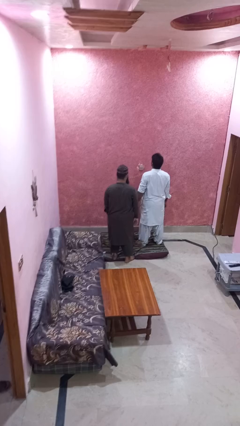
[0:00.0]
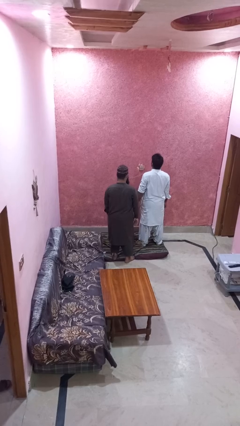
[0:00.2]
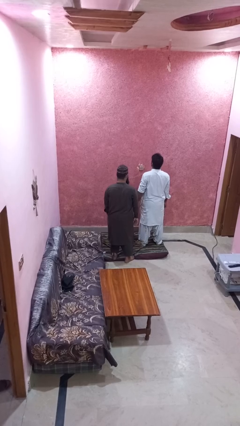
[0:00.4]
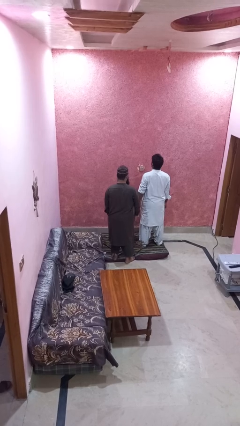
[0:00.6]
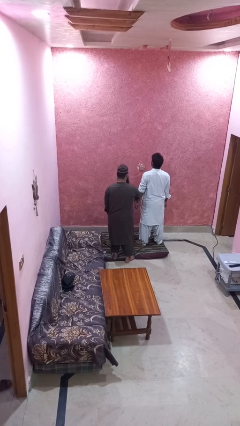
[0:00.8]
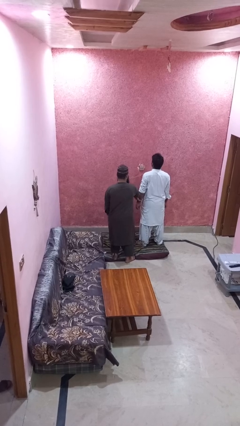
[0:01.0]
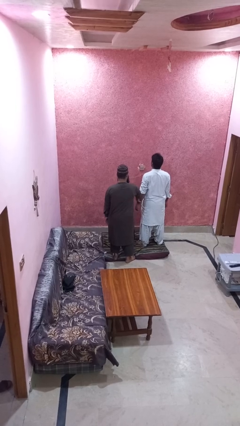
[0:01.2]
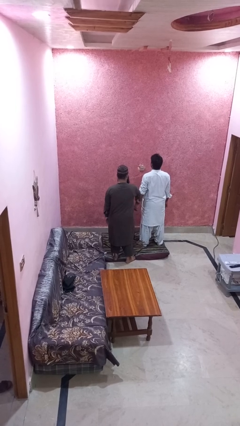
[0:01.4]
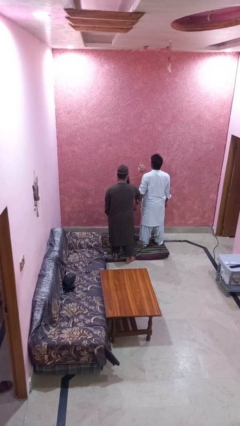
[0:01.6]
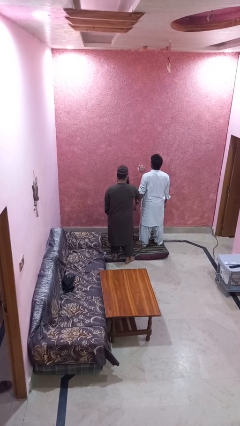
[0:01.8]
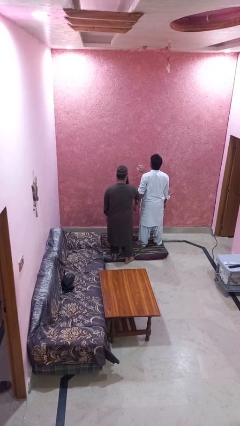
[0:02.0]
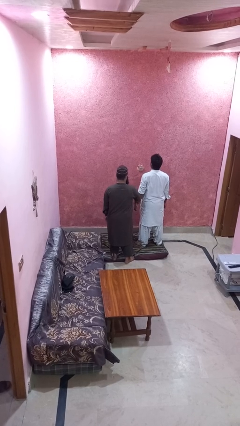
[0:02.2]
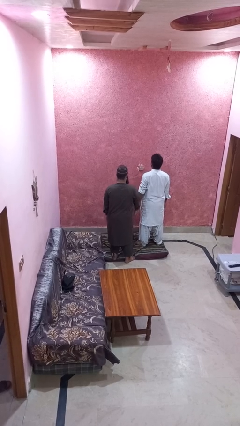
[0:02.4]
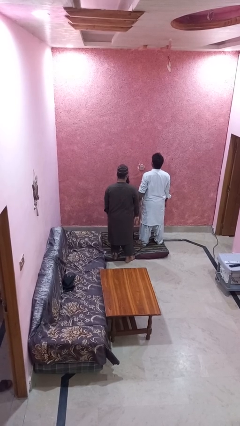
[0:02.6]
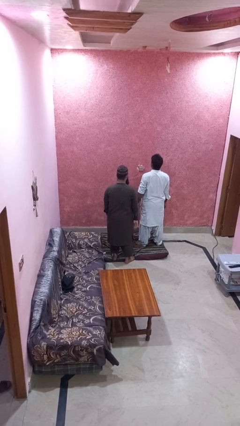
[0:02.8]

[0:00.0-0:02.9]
person grabs person by forearm

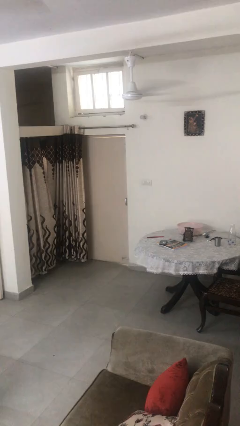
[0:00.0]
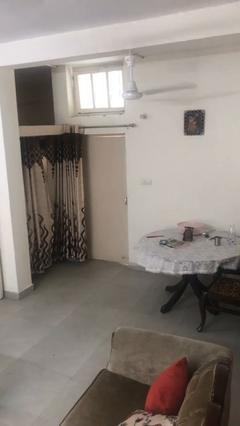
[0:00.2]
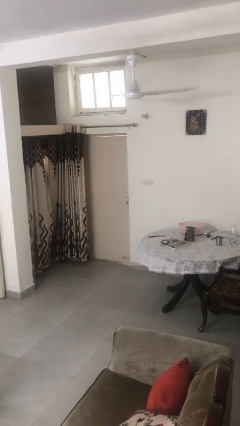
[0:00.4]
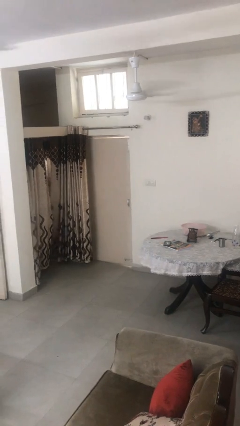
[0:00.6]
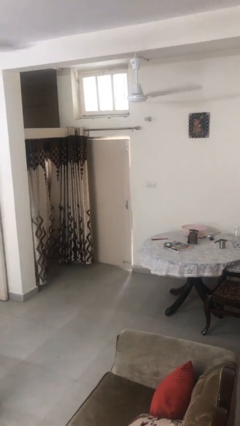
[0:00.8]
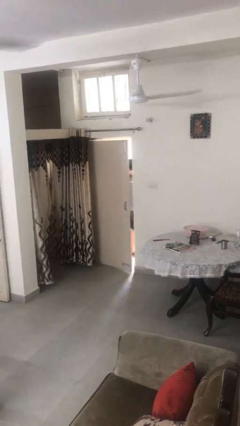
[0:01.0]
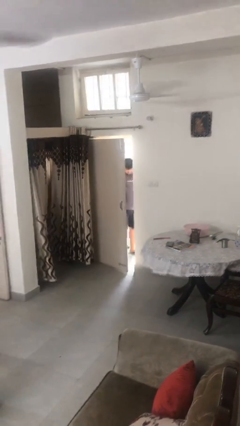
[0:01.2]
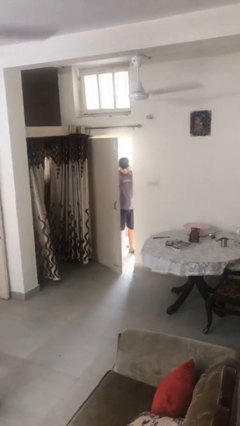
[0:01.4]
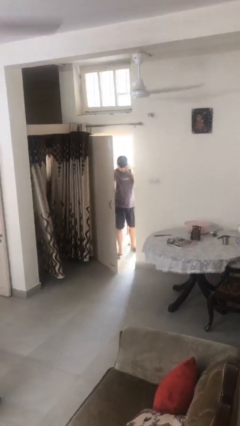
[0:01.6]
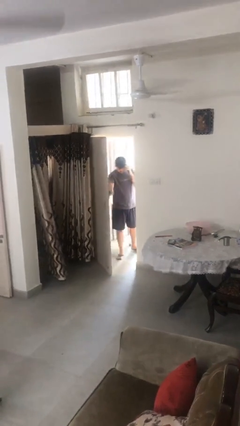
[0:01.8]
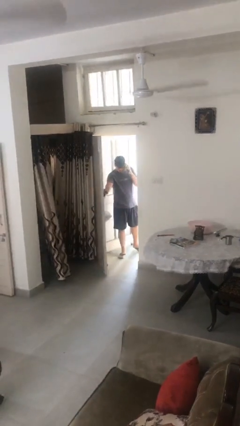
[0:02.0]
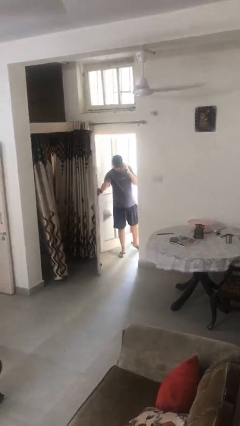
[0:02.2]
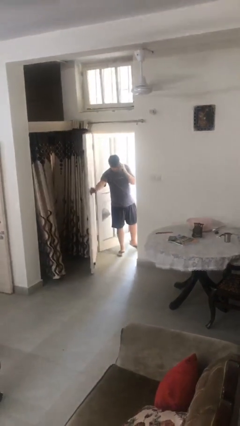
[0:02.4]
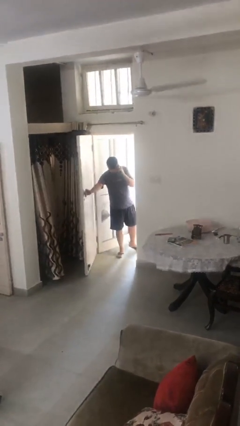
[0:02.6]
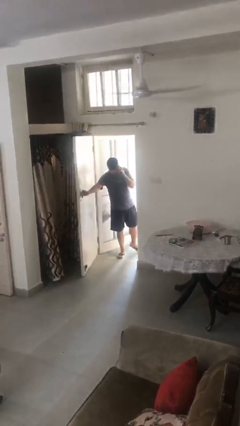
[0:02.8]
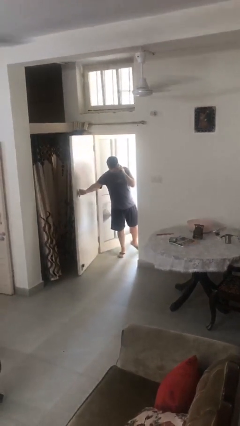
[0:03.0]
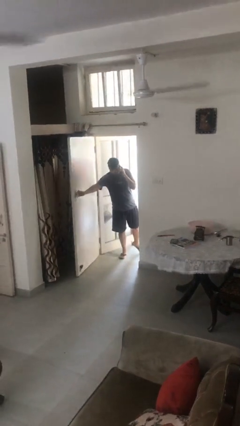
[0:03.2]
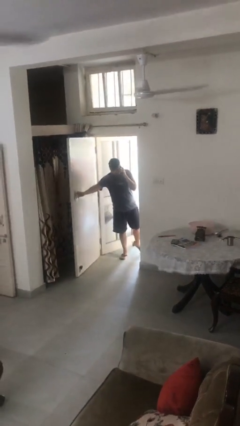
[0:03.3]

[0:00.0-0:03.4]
person opens facility door

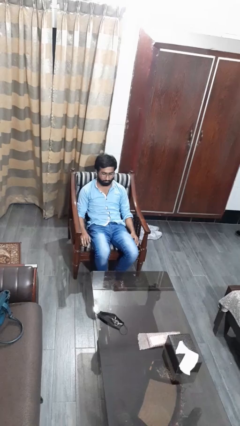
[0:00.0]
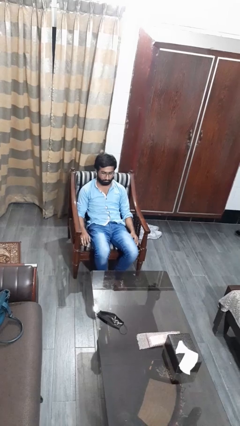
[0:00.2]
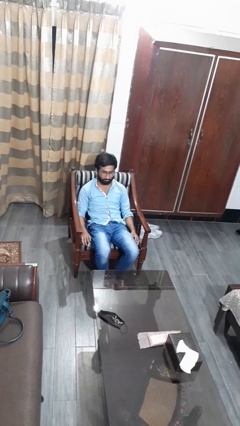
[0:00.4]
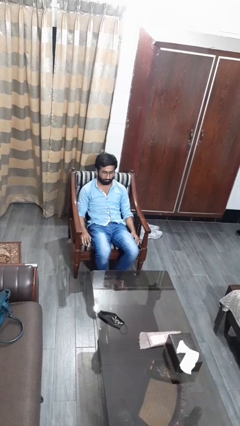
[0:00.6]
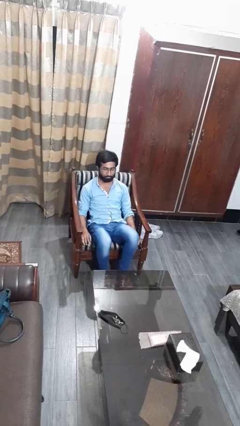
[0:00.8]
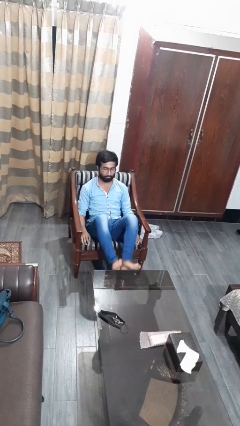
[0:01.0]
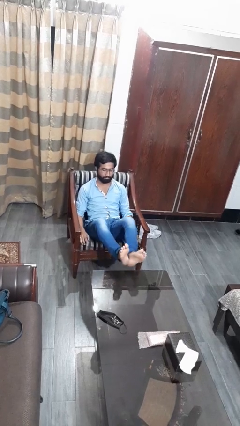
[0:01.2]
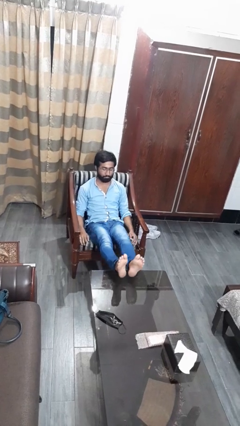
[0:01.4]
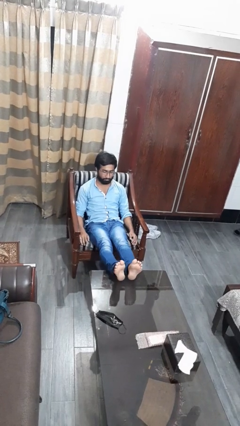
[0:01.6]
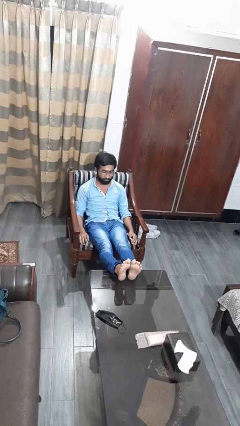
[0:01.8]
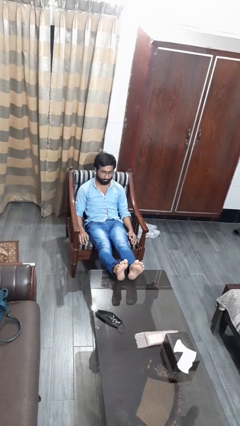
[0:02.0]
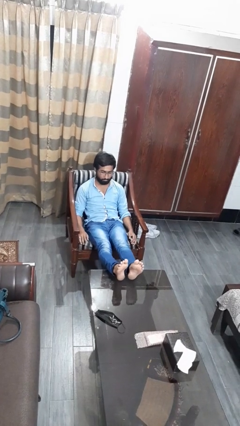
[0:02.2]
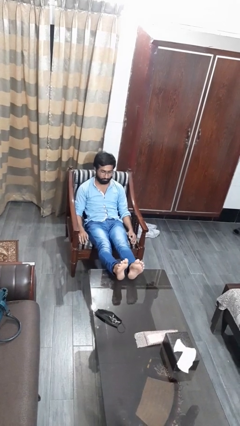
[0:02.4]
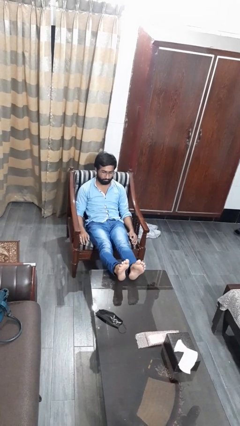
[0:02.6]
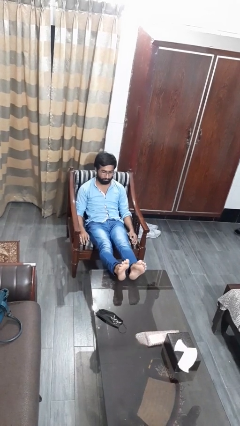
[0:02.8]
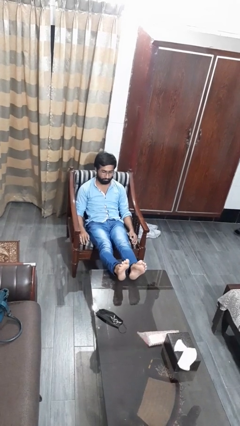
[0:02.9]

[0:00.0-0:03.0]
person puts feet up

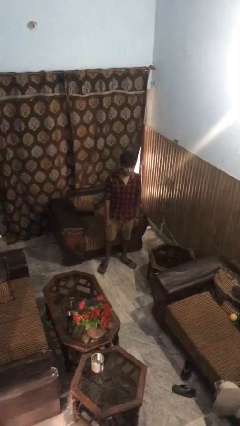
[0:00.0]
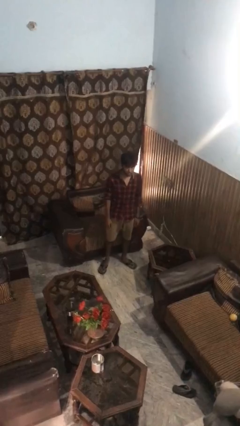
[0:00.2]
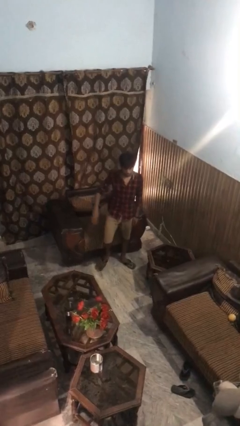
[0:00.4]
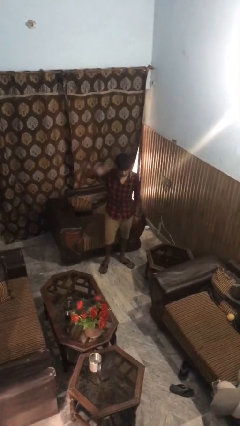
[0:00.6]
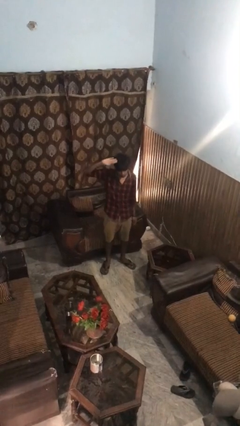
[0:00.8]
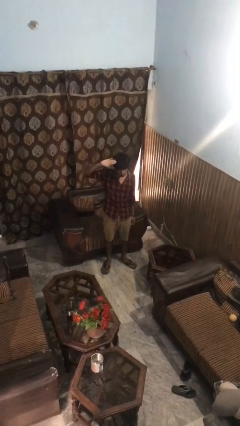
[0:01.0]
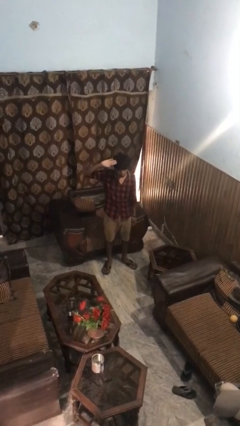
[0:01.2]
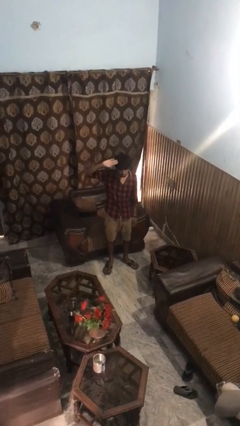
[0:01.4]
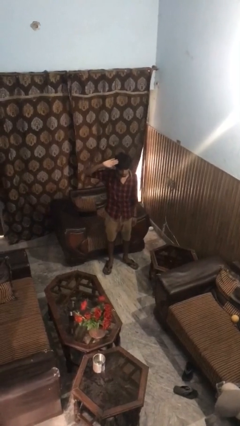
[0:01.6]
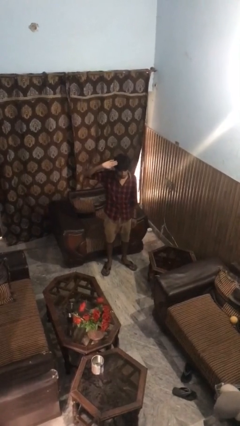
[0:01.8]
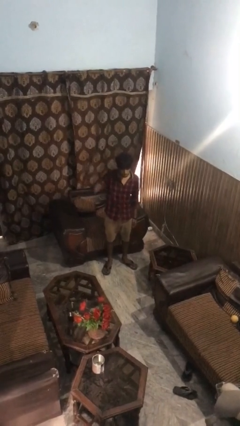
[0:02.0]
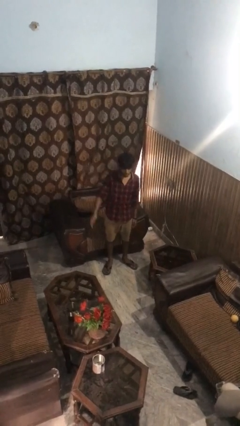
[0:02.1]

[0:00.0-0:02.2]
person salutes

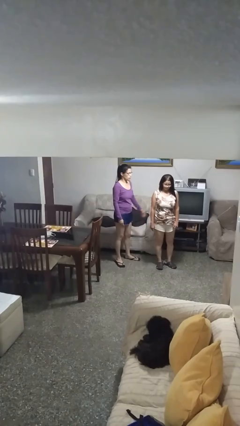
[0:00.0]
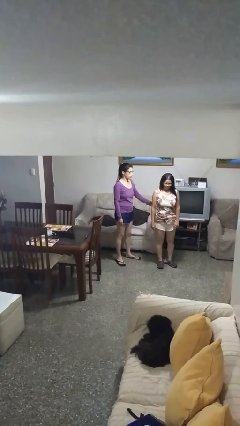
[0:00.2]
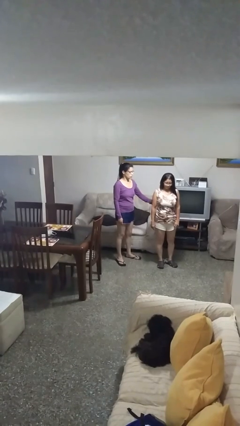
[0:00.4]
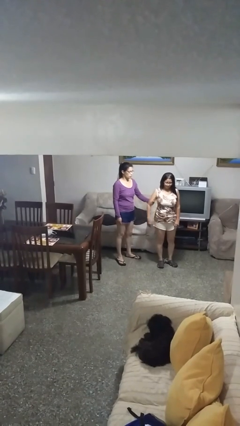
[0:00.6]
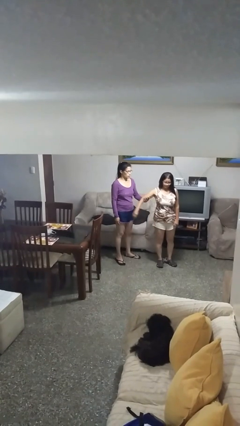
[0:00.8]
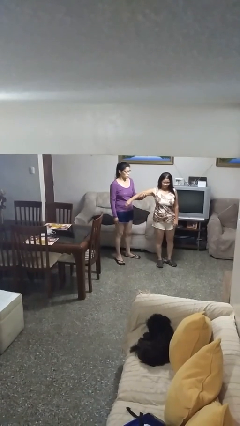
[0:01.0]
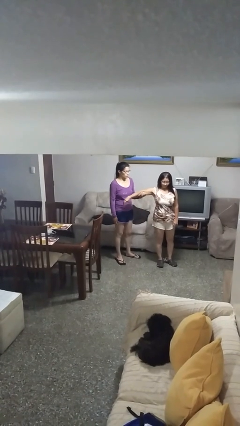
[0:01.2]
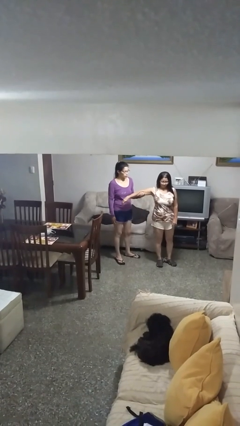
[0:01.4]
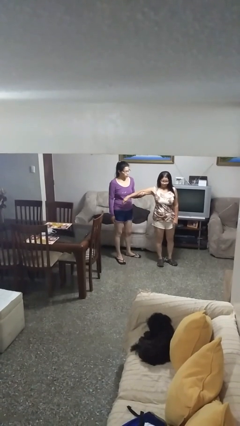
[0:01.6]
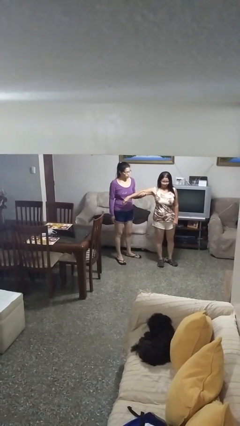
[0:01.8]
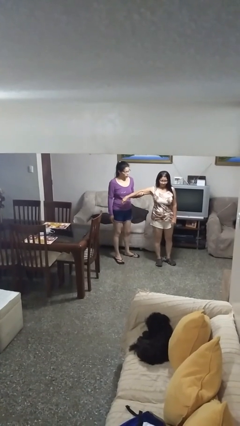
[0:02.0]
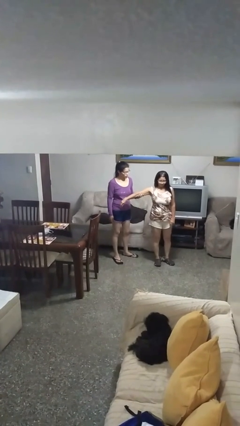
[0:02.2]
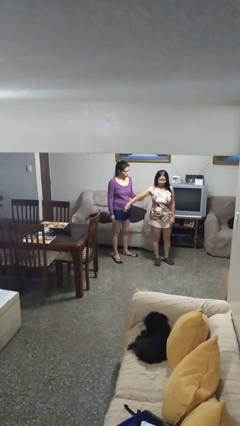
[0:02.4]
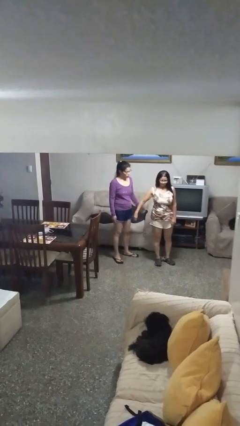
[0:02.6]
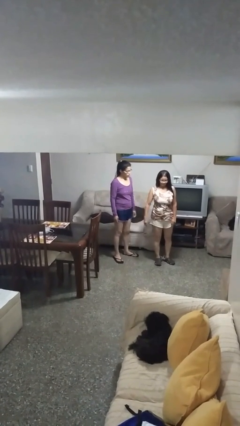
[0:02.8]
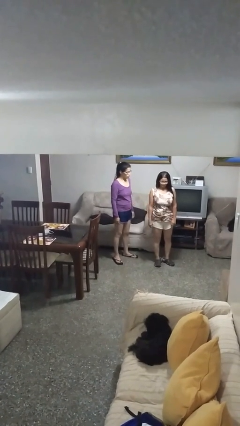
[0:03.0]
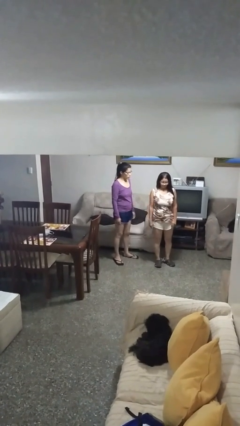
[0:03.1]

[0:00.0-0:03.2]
person grabs person by bicep

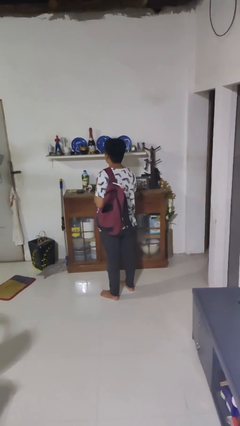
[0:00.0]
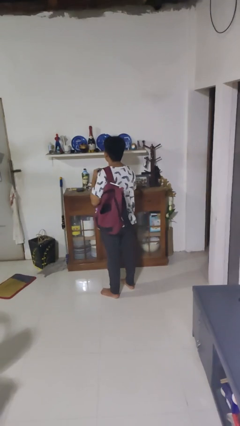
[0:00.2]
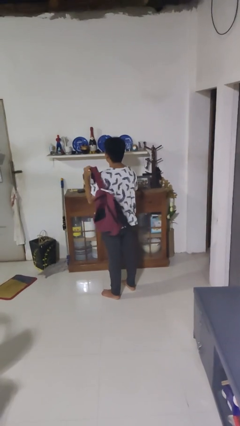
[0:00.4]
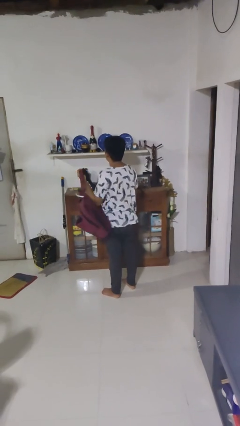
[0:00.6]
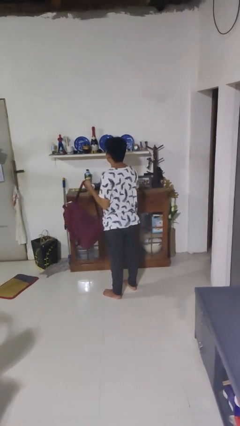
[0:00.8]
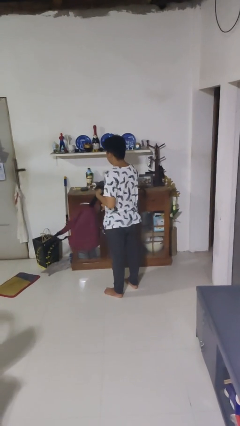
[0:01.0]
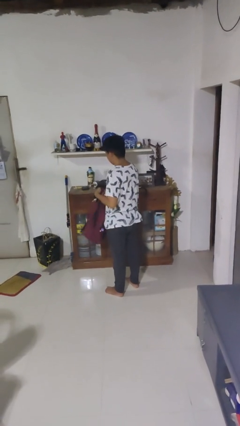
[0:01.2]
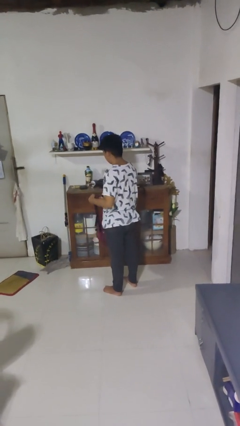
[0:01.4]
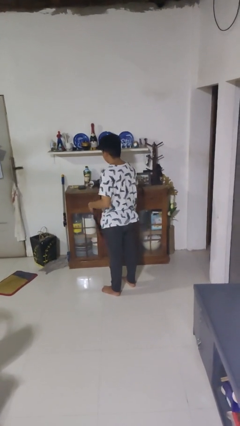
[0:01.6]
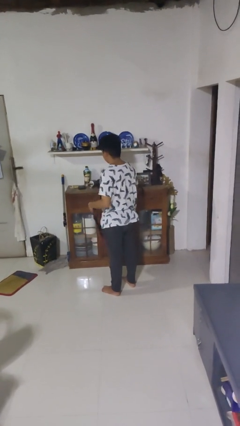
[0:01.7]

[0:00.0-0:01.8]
person takes off backpack

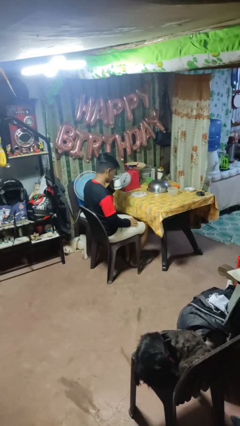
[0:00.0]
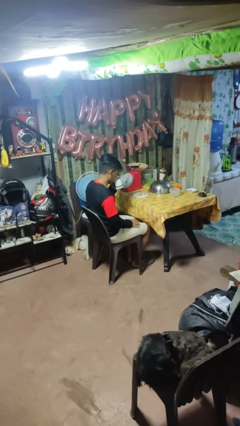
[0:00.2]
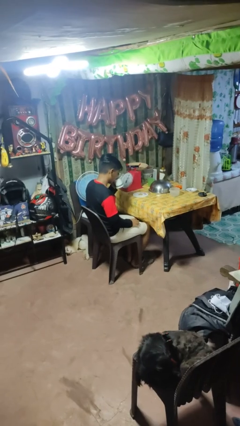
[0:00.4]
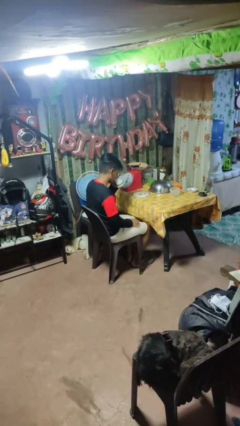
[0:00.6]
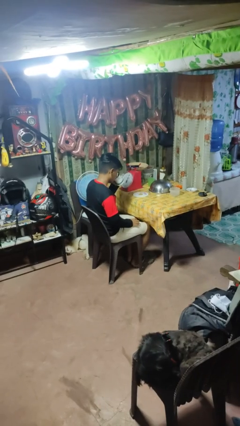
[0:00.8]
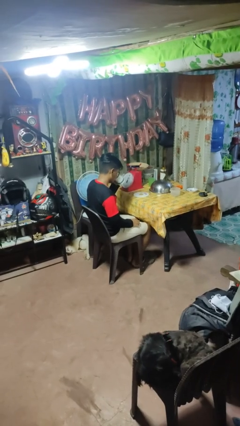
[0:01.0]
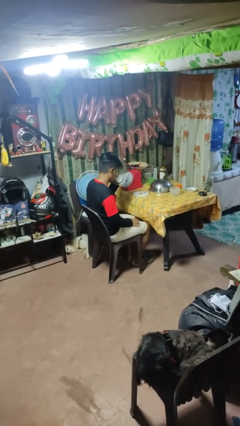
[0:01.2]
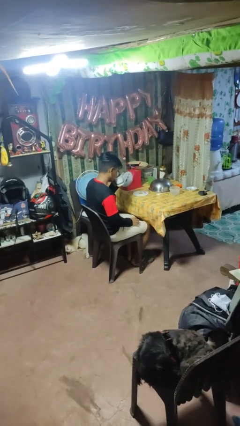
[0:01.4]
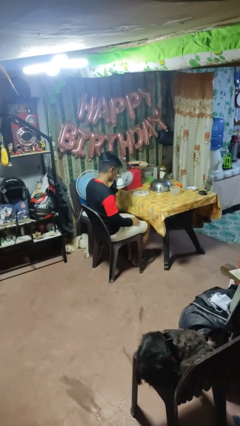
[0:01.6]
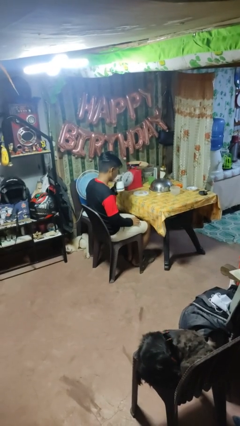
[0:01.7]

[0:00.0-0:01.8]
person drinks from mug
